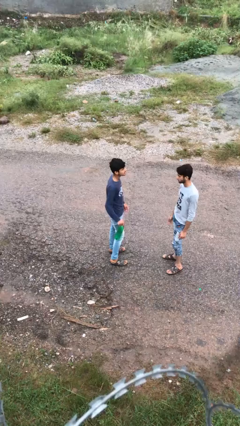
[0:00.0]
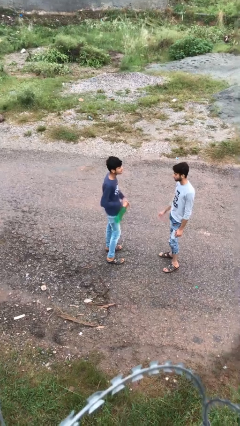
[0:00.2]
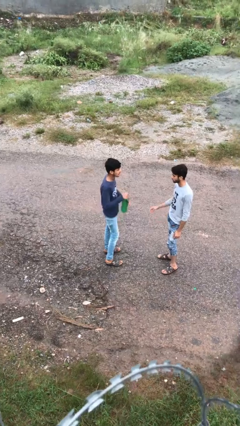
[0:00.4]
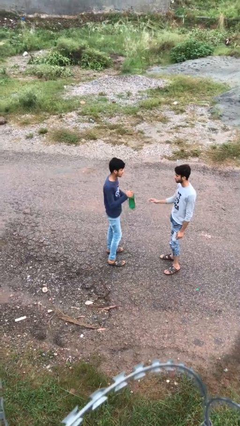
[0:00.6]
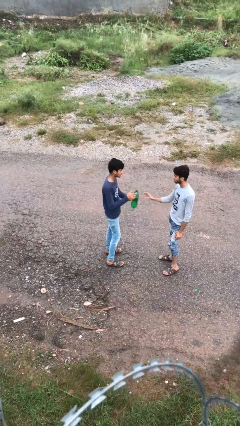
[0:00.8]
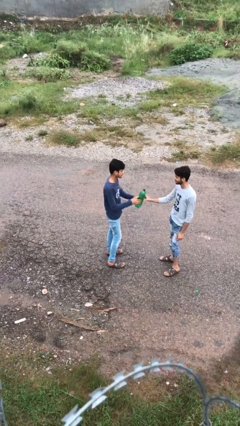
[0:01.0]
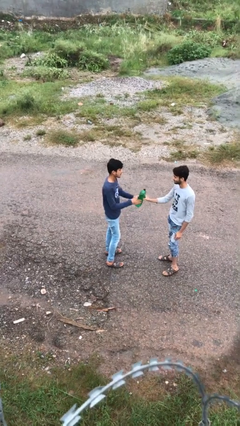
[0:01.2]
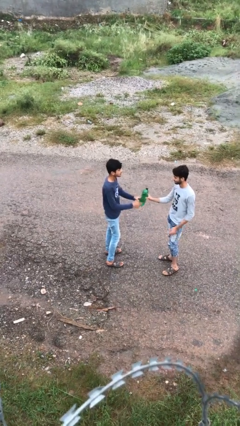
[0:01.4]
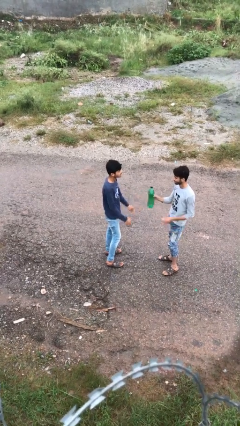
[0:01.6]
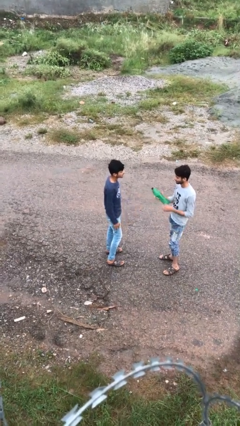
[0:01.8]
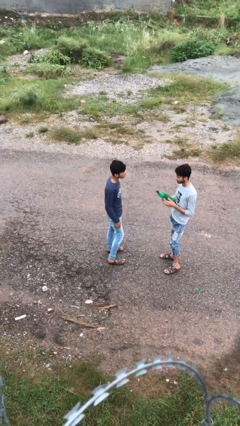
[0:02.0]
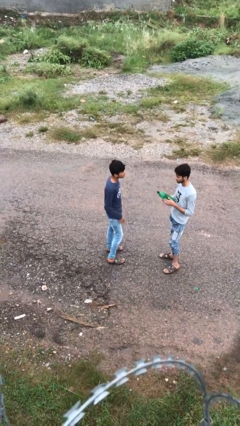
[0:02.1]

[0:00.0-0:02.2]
person transfers object to person

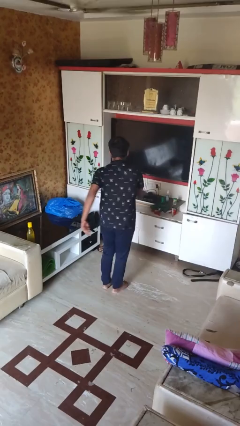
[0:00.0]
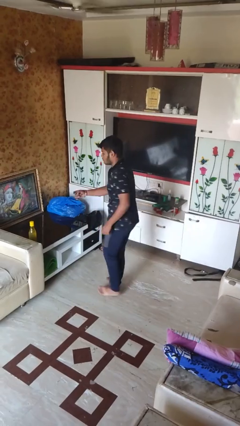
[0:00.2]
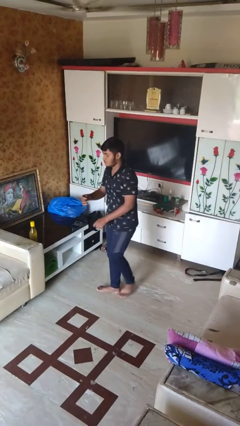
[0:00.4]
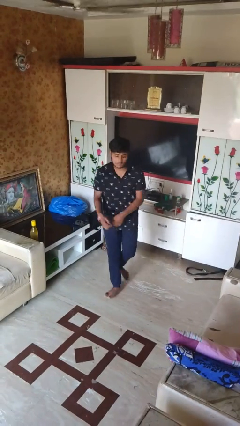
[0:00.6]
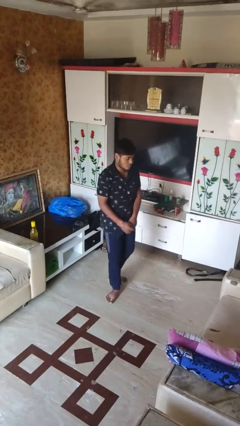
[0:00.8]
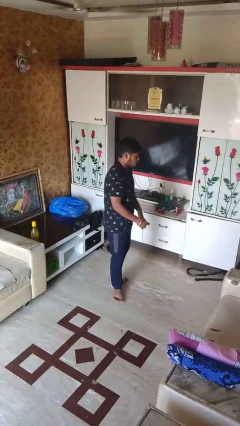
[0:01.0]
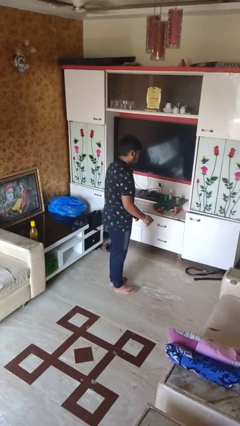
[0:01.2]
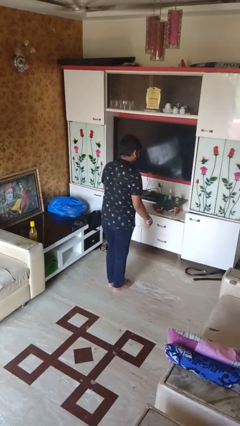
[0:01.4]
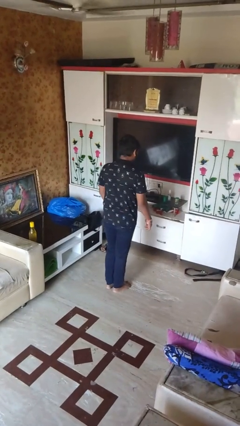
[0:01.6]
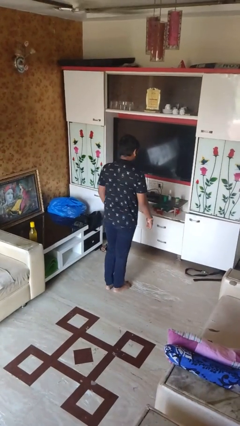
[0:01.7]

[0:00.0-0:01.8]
person twirls

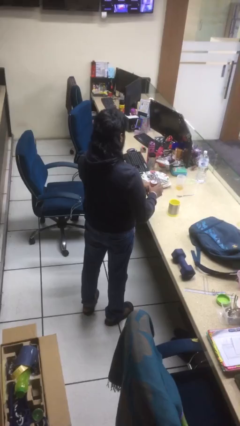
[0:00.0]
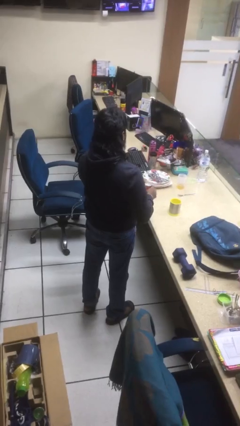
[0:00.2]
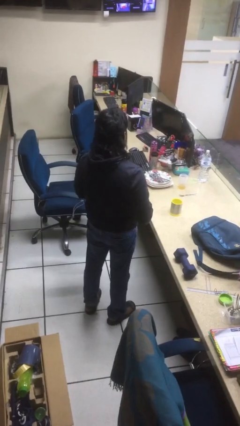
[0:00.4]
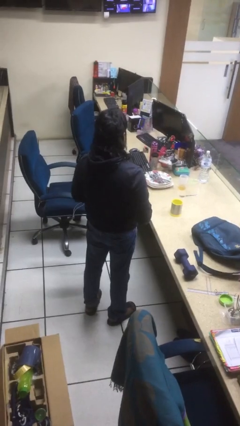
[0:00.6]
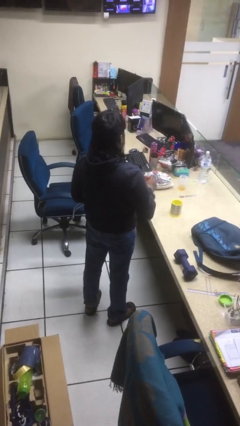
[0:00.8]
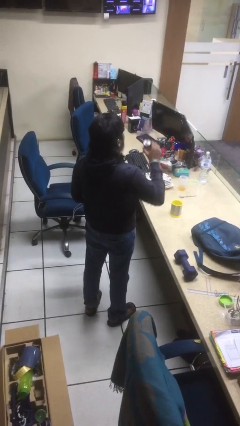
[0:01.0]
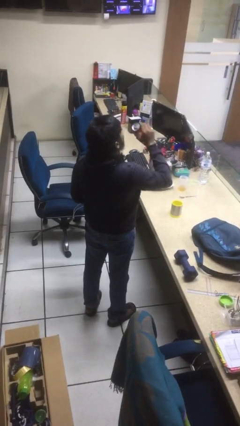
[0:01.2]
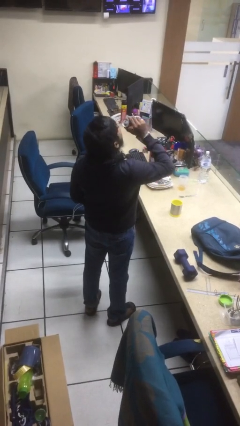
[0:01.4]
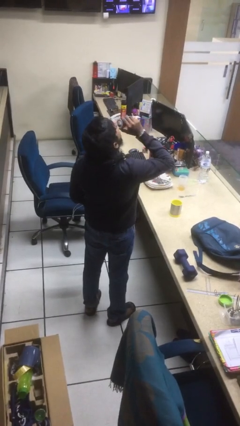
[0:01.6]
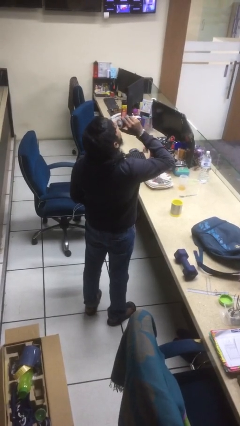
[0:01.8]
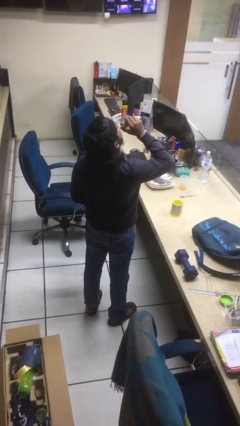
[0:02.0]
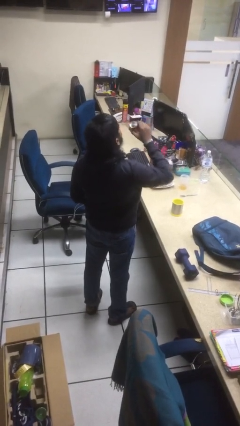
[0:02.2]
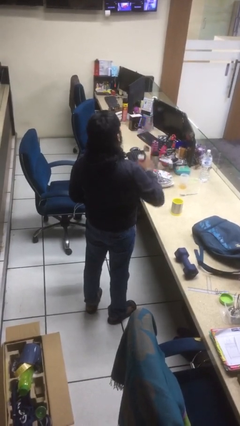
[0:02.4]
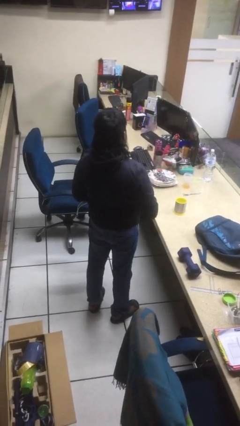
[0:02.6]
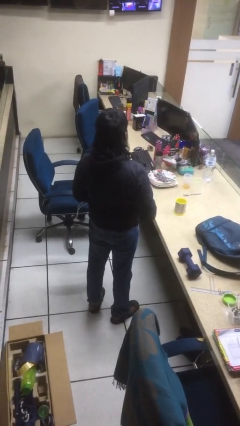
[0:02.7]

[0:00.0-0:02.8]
person drinks from beverage can

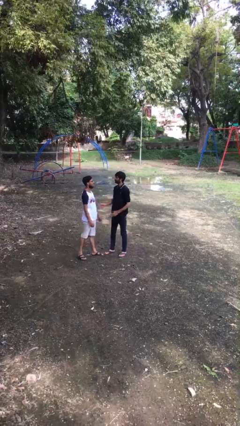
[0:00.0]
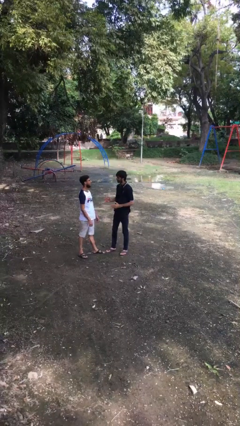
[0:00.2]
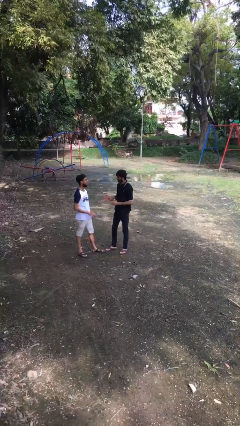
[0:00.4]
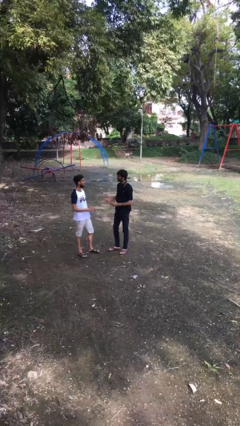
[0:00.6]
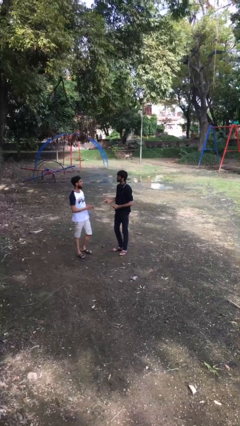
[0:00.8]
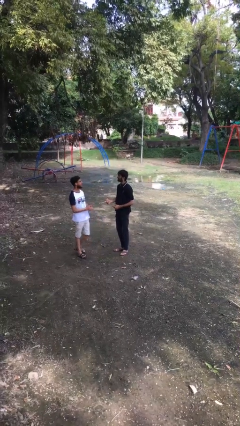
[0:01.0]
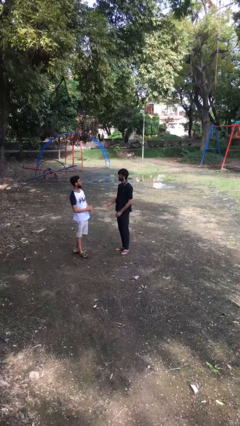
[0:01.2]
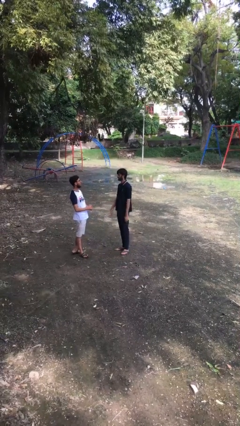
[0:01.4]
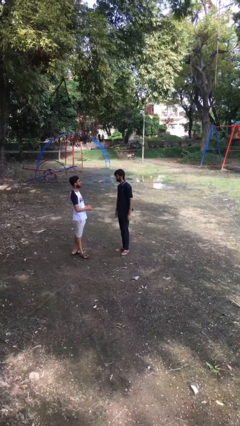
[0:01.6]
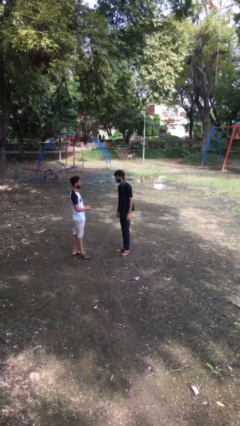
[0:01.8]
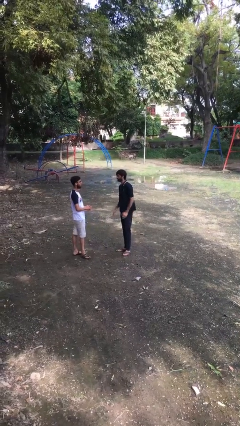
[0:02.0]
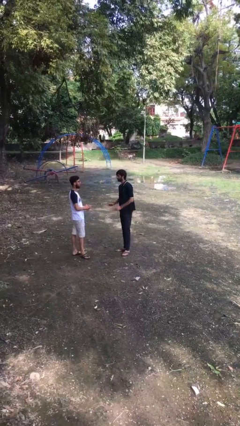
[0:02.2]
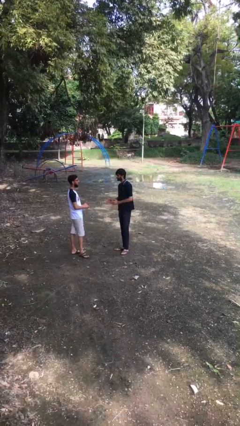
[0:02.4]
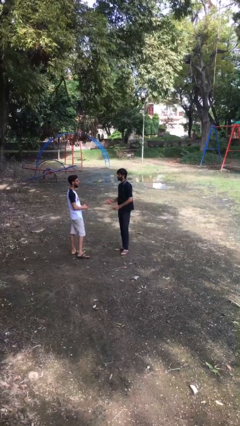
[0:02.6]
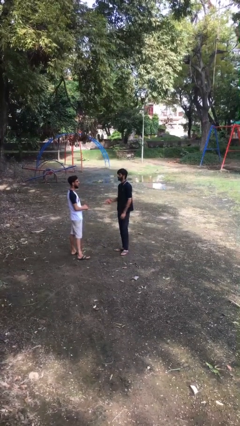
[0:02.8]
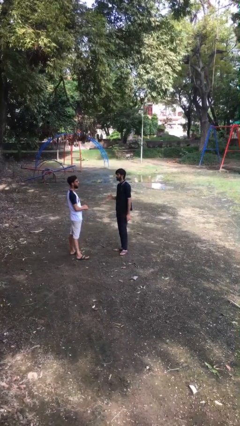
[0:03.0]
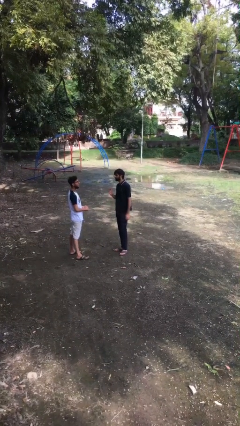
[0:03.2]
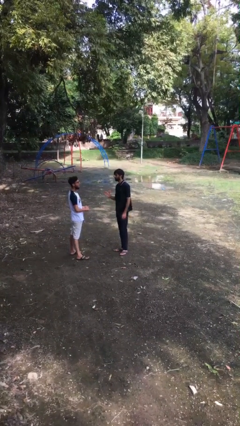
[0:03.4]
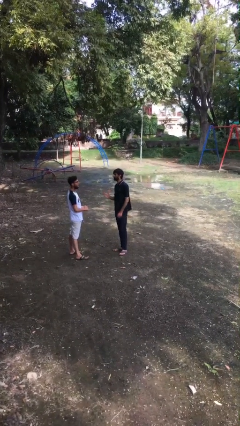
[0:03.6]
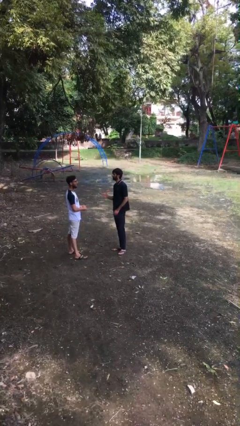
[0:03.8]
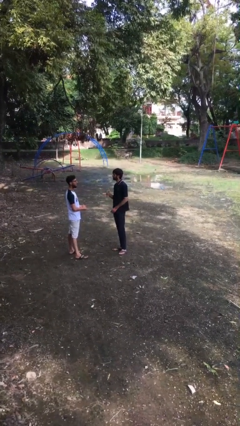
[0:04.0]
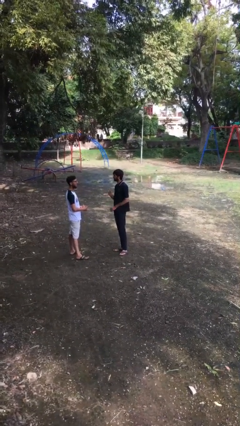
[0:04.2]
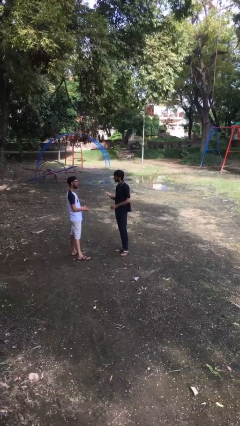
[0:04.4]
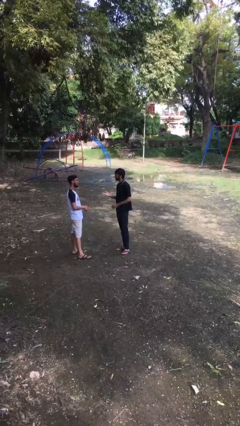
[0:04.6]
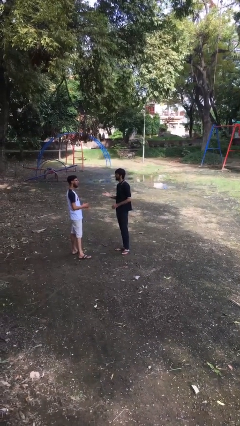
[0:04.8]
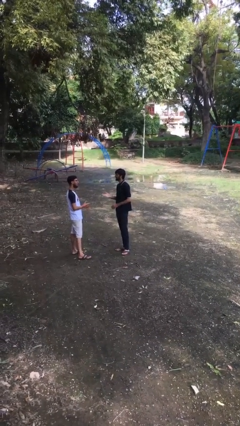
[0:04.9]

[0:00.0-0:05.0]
person talks to person

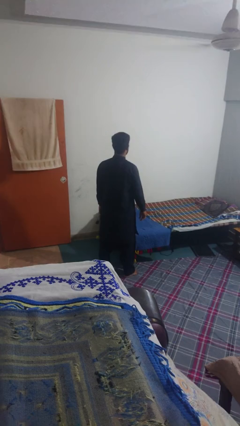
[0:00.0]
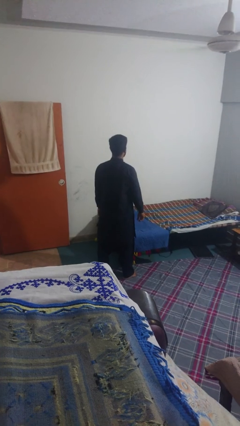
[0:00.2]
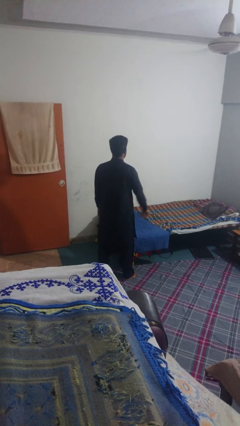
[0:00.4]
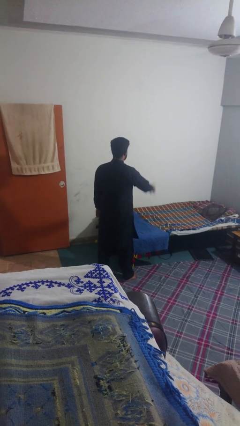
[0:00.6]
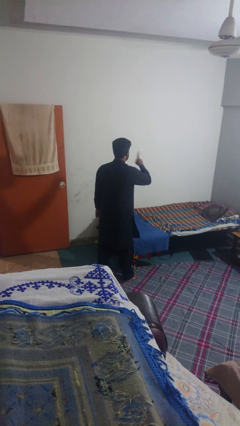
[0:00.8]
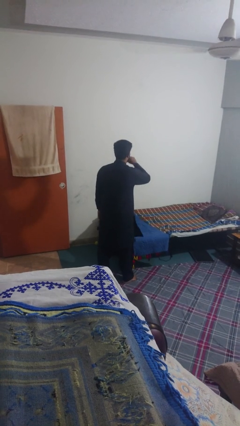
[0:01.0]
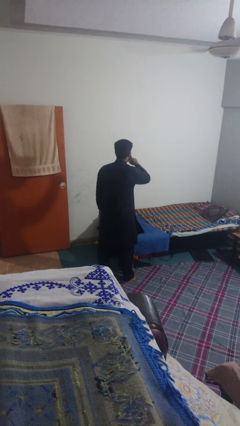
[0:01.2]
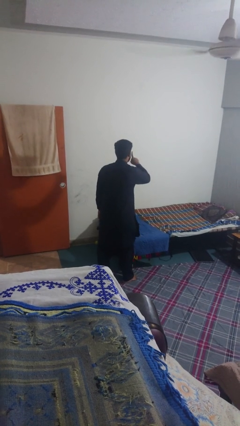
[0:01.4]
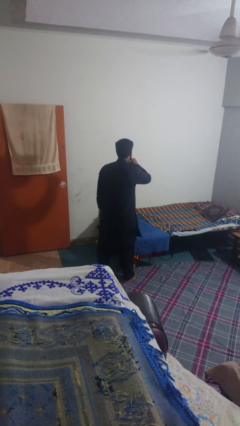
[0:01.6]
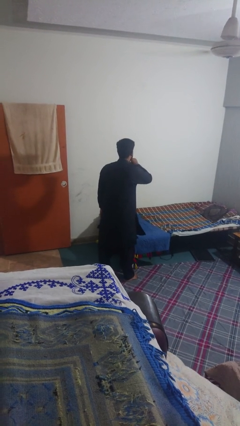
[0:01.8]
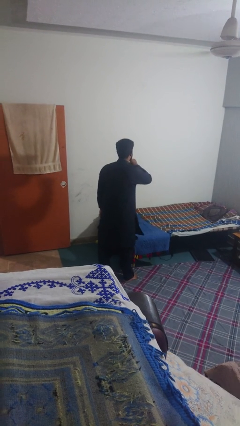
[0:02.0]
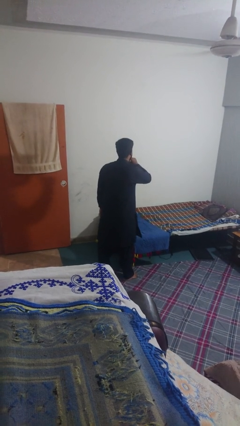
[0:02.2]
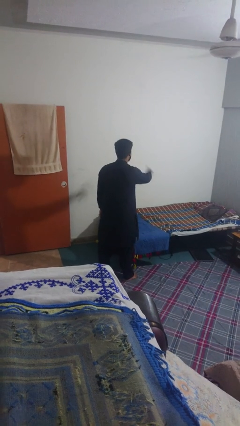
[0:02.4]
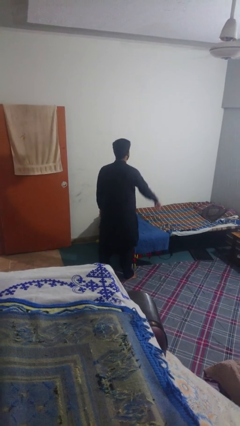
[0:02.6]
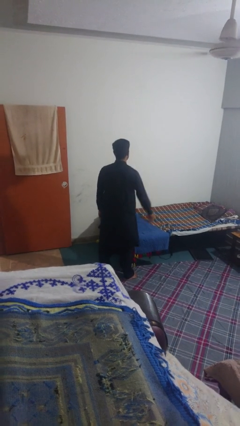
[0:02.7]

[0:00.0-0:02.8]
person gestures be quiet

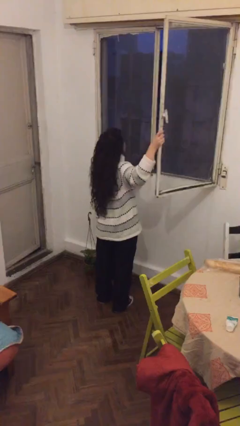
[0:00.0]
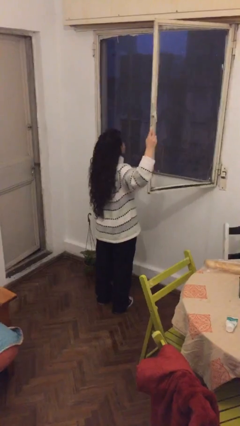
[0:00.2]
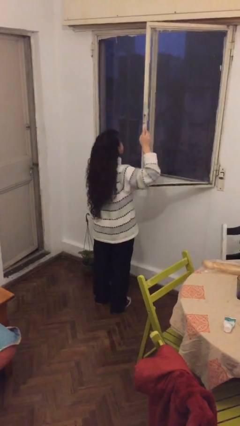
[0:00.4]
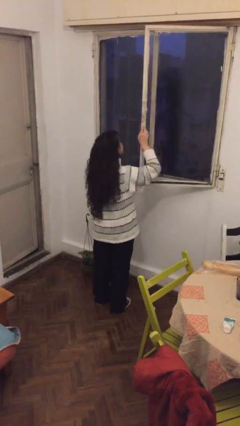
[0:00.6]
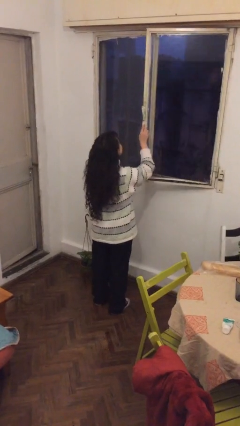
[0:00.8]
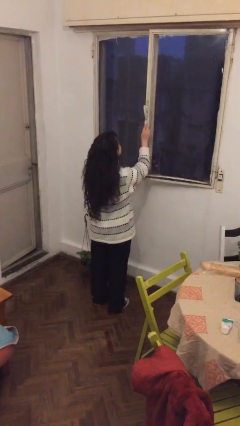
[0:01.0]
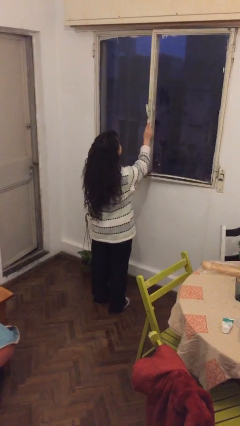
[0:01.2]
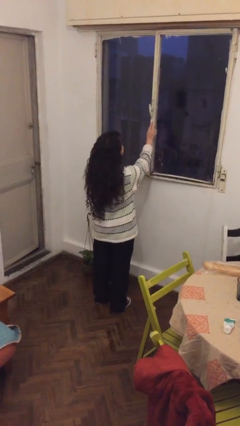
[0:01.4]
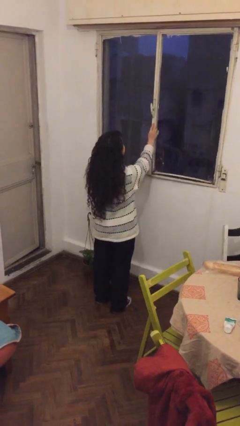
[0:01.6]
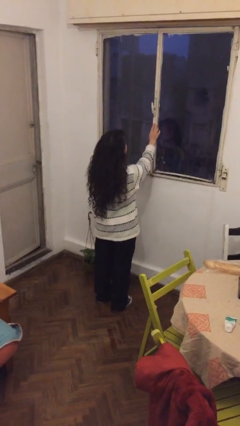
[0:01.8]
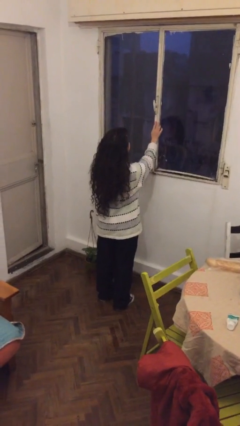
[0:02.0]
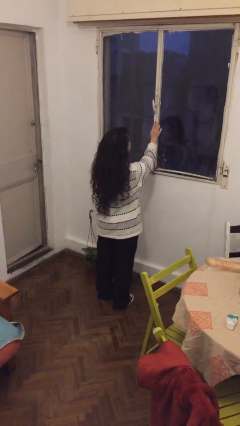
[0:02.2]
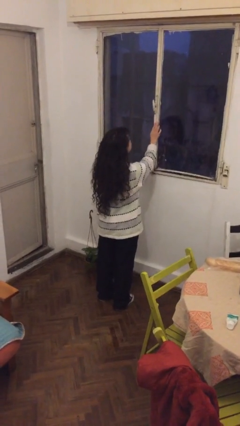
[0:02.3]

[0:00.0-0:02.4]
person closes home window

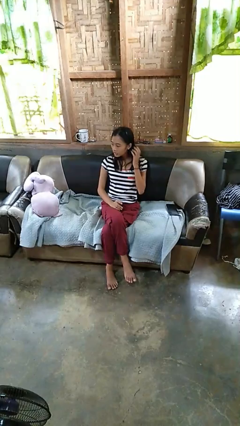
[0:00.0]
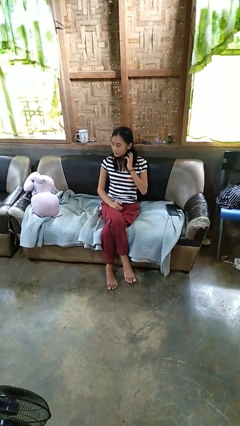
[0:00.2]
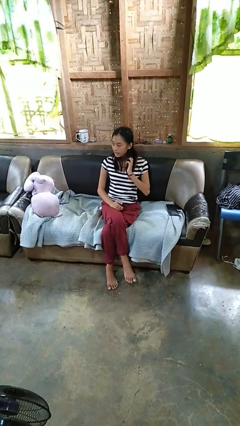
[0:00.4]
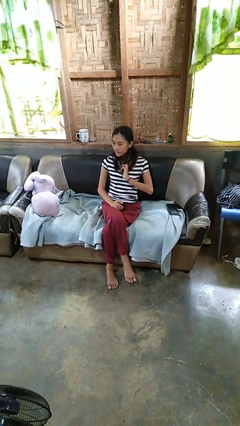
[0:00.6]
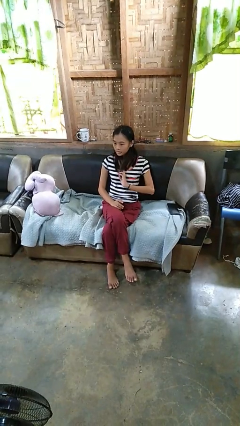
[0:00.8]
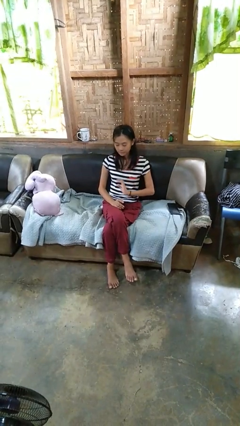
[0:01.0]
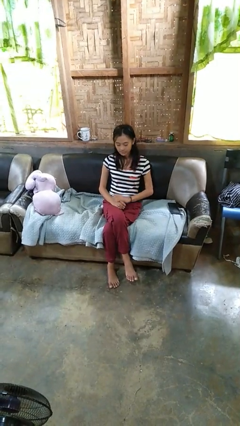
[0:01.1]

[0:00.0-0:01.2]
person strokes hair
